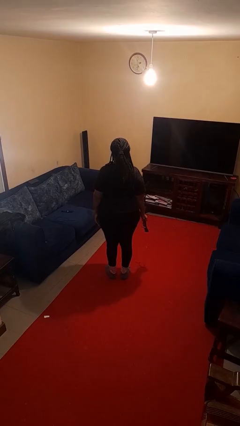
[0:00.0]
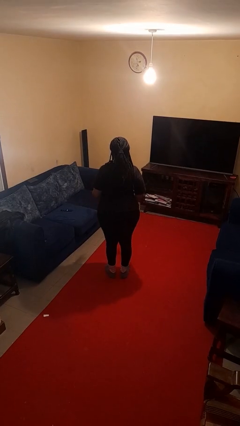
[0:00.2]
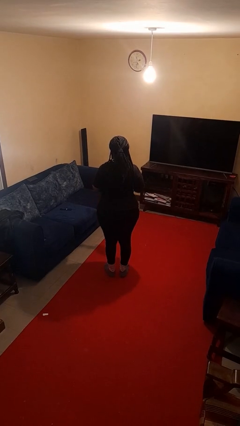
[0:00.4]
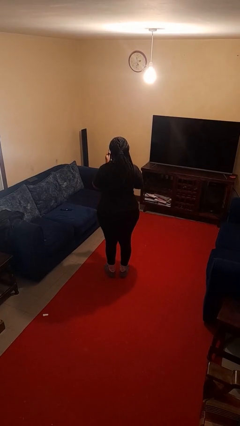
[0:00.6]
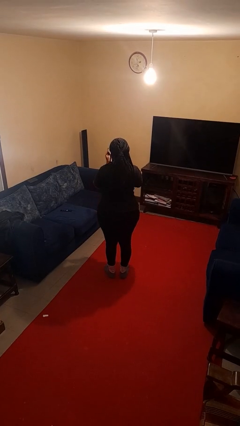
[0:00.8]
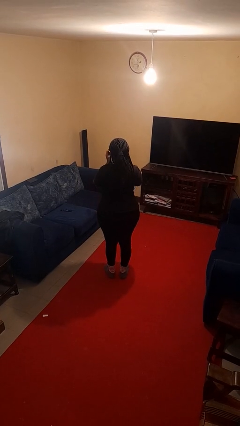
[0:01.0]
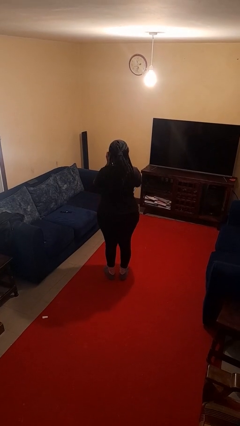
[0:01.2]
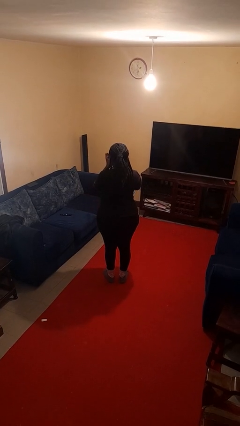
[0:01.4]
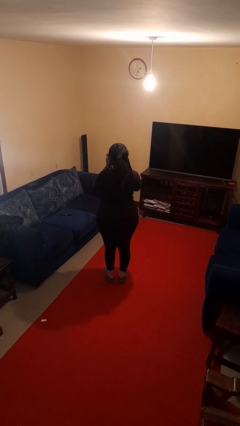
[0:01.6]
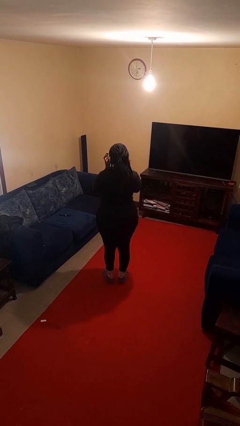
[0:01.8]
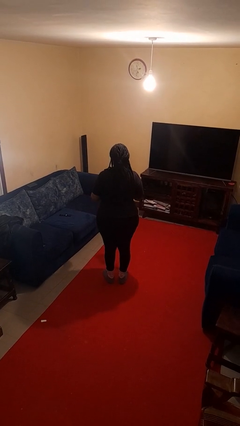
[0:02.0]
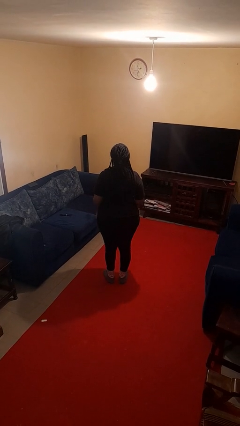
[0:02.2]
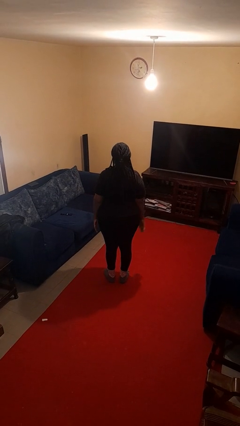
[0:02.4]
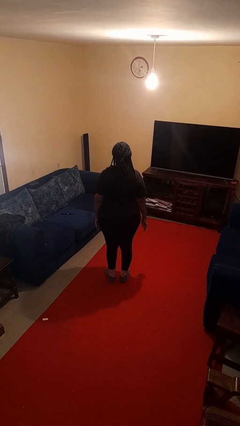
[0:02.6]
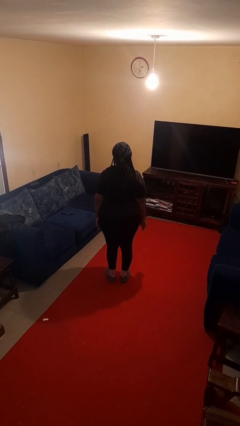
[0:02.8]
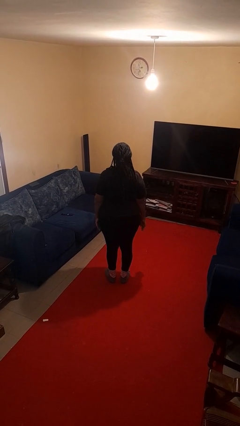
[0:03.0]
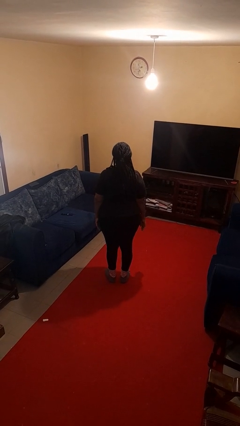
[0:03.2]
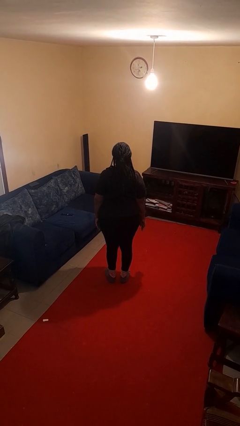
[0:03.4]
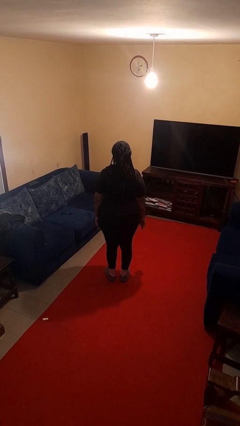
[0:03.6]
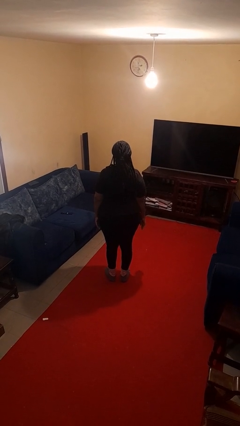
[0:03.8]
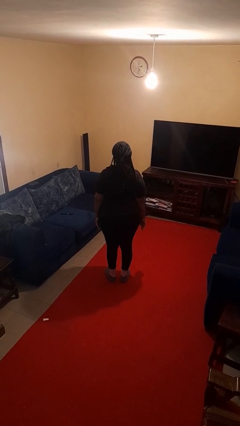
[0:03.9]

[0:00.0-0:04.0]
person puts on sunglasses

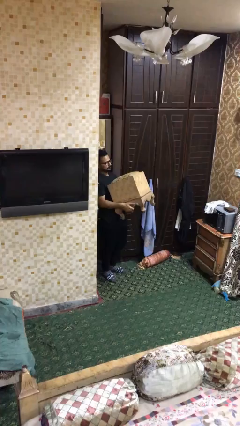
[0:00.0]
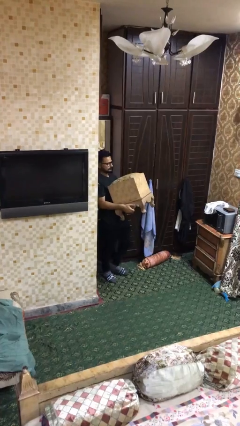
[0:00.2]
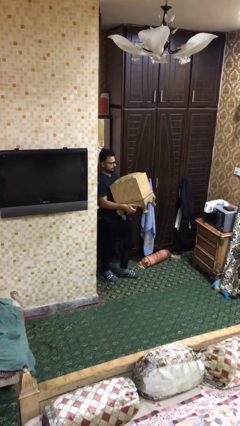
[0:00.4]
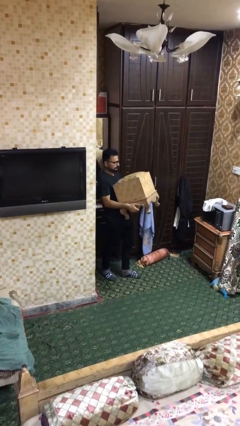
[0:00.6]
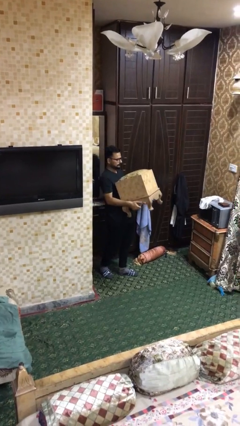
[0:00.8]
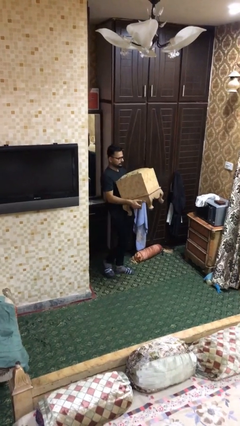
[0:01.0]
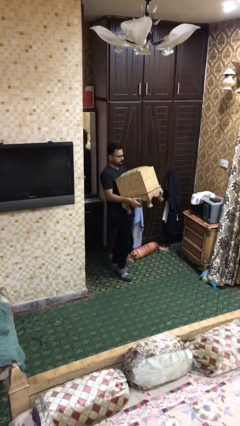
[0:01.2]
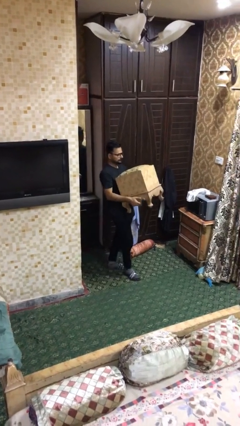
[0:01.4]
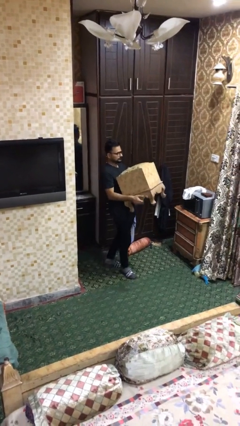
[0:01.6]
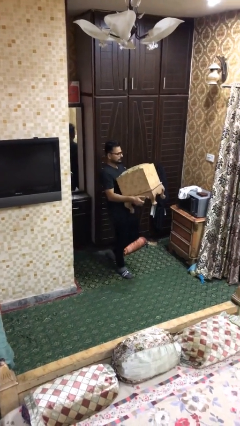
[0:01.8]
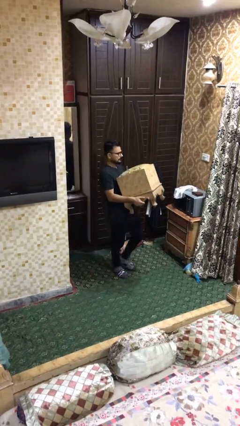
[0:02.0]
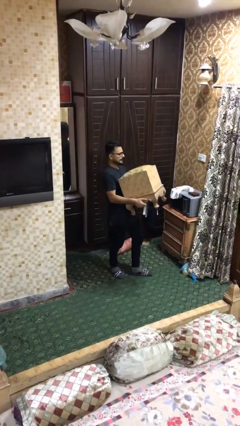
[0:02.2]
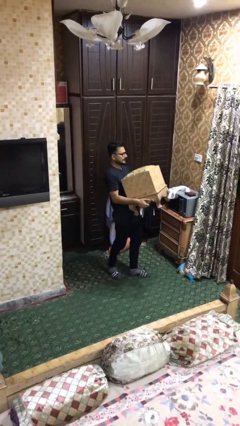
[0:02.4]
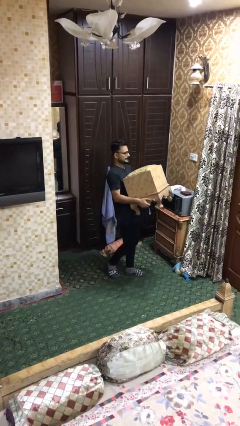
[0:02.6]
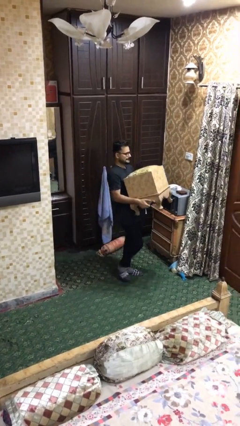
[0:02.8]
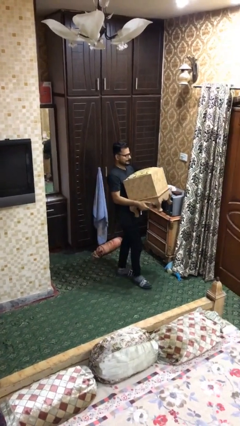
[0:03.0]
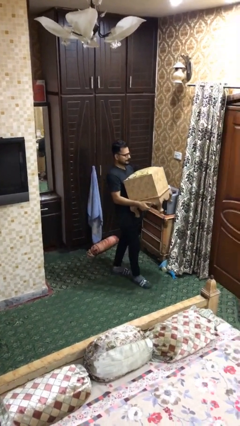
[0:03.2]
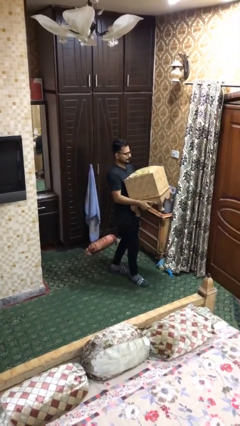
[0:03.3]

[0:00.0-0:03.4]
person carries heavy object

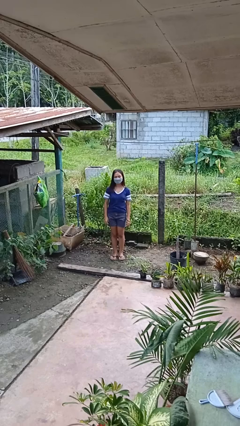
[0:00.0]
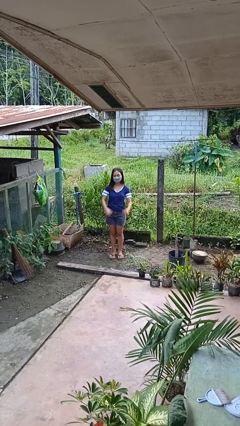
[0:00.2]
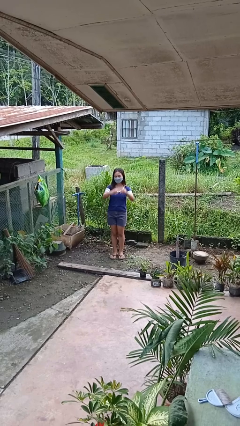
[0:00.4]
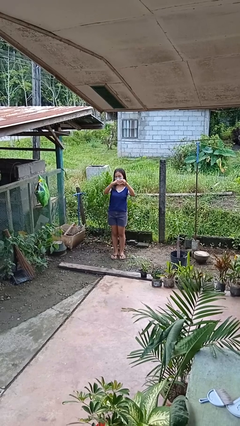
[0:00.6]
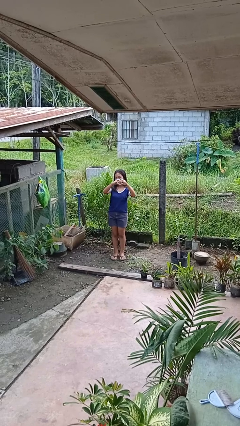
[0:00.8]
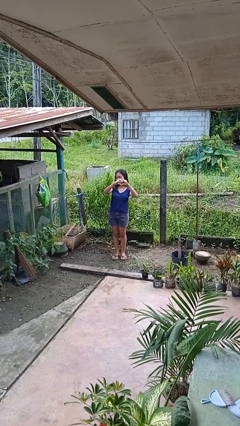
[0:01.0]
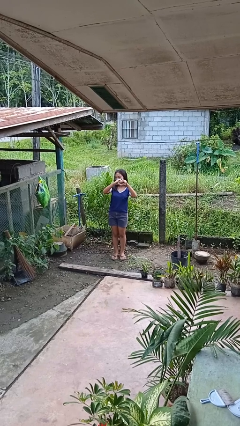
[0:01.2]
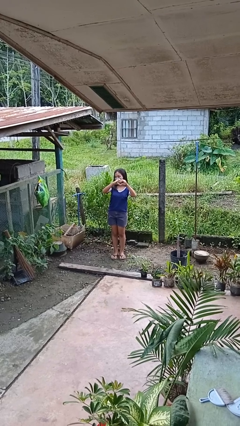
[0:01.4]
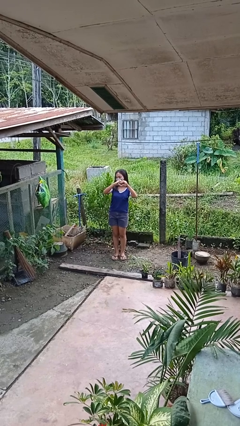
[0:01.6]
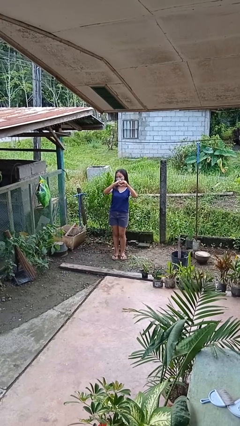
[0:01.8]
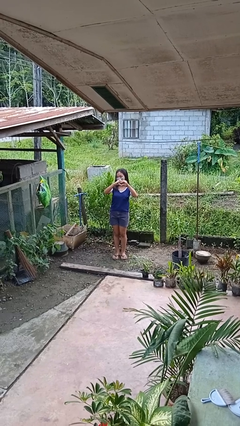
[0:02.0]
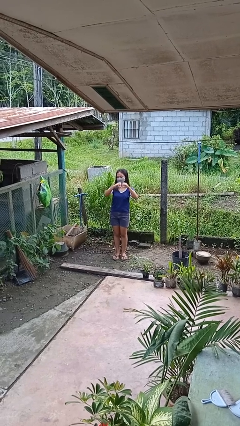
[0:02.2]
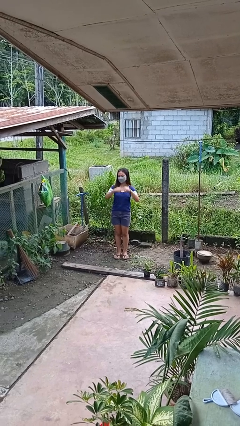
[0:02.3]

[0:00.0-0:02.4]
person gestures heart

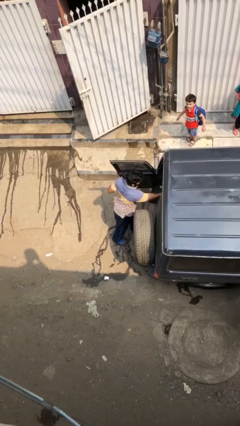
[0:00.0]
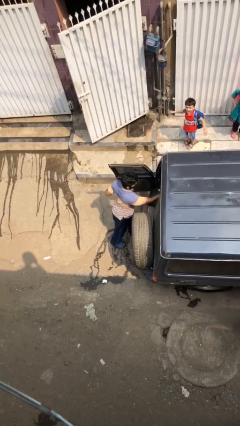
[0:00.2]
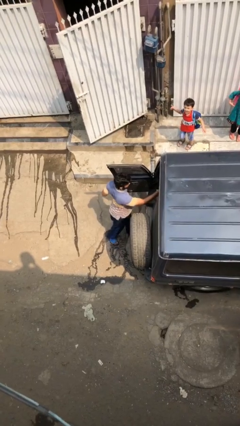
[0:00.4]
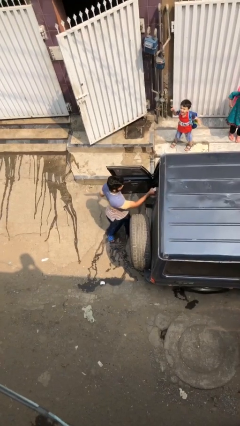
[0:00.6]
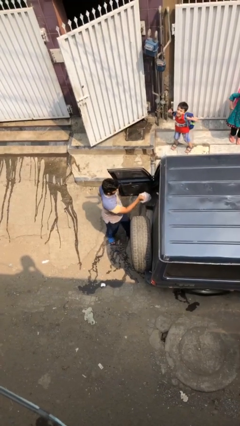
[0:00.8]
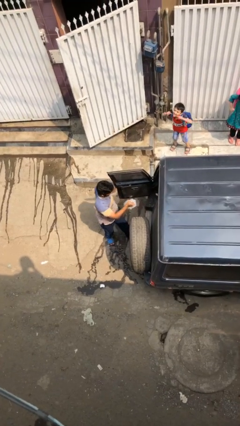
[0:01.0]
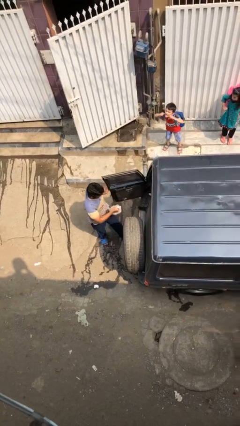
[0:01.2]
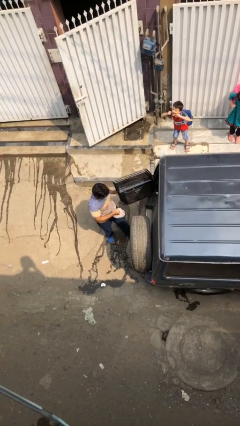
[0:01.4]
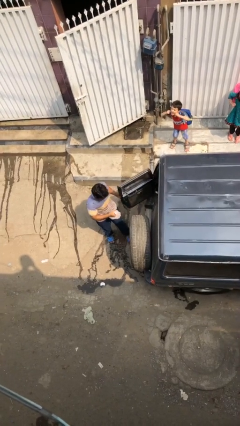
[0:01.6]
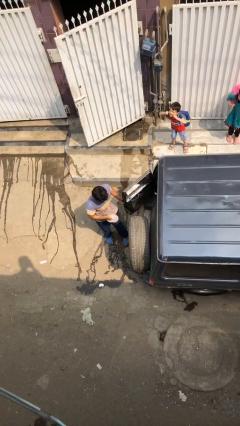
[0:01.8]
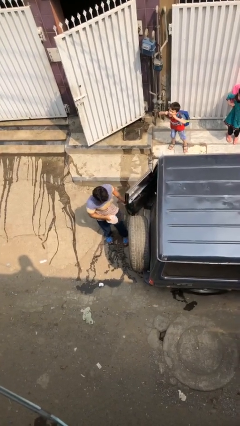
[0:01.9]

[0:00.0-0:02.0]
person unloads car

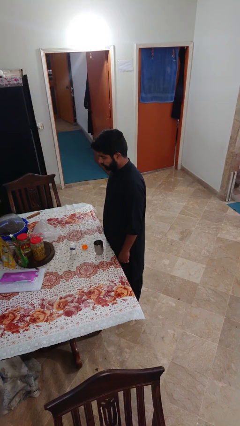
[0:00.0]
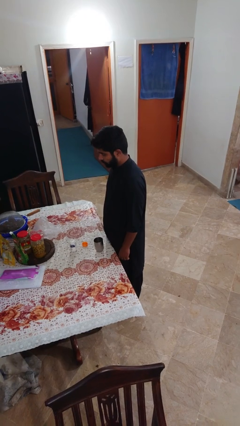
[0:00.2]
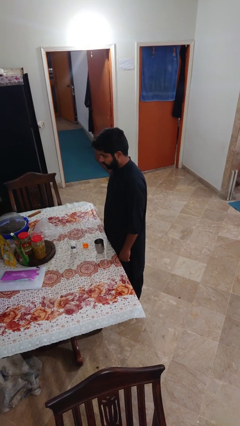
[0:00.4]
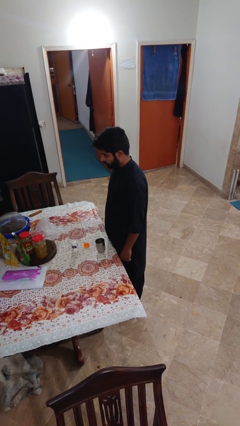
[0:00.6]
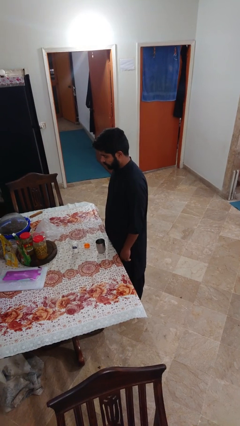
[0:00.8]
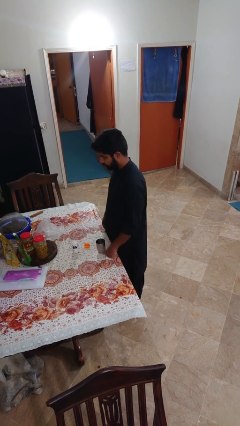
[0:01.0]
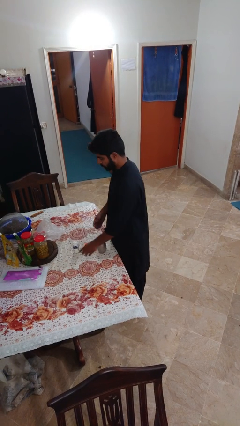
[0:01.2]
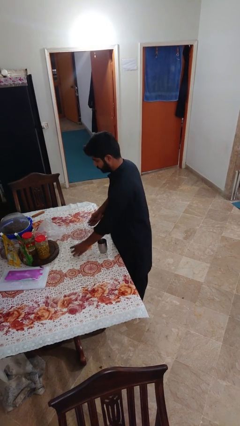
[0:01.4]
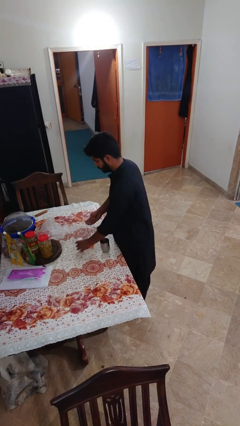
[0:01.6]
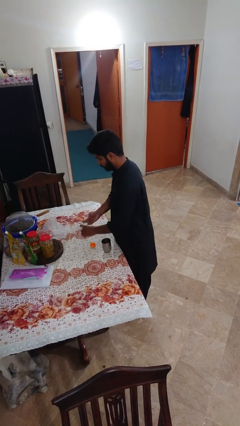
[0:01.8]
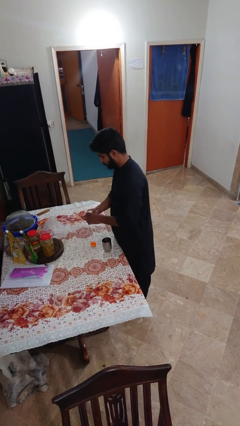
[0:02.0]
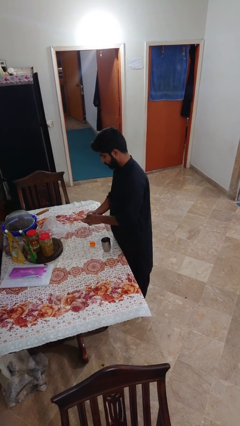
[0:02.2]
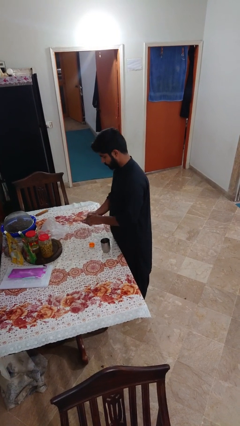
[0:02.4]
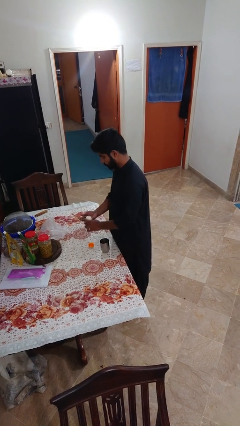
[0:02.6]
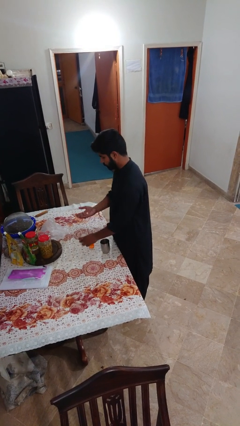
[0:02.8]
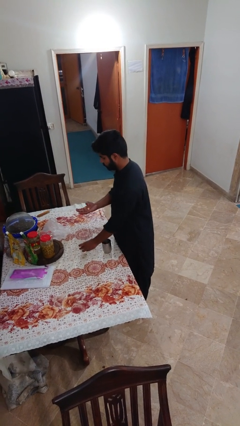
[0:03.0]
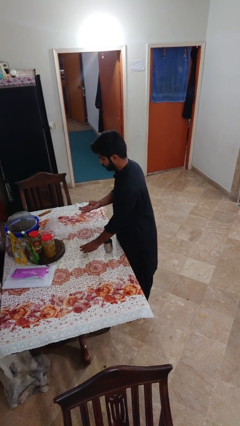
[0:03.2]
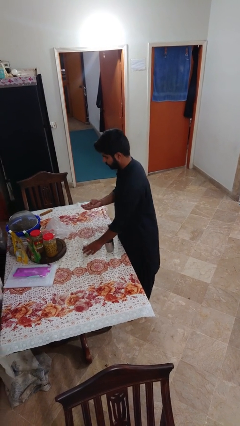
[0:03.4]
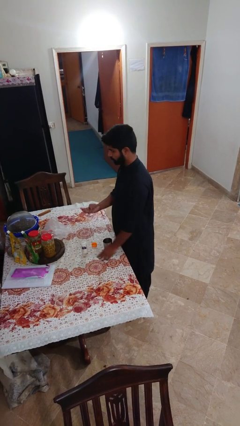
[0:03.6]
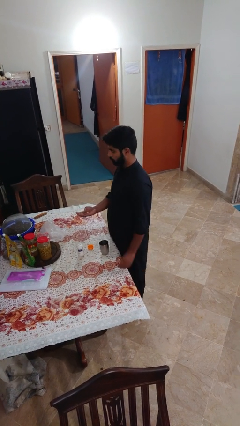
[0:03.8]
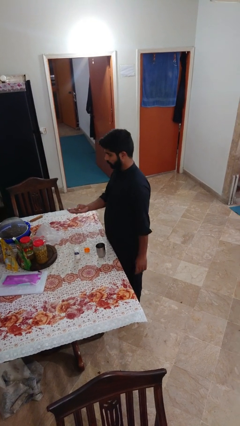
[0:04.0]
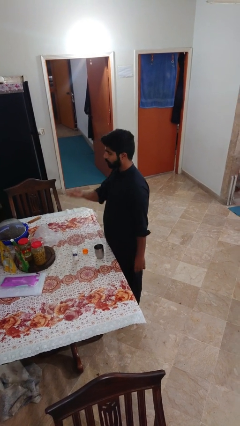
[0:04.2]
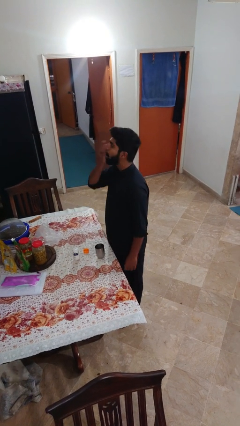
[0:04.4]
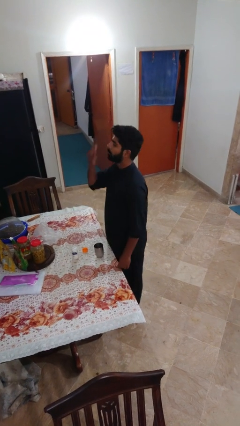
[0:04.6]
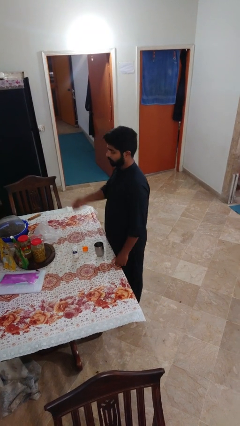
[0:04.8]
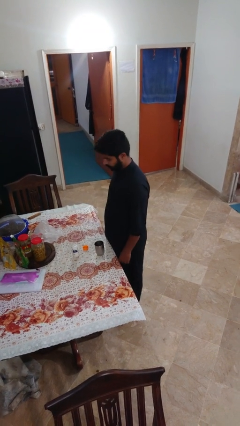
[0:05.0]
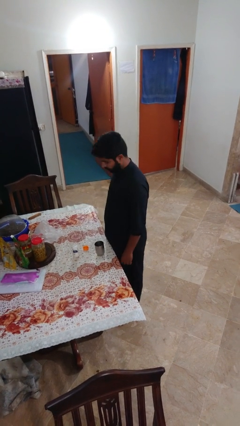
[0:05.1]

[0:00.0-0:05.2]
person takes medicine pills

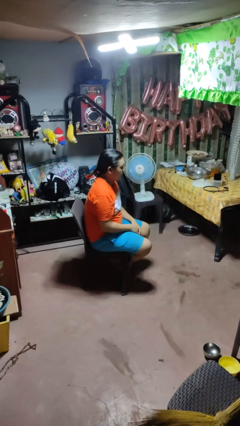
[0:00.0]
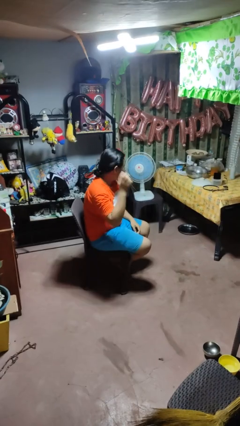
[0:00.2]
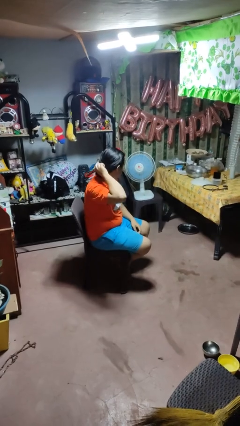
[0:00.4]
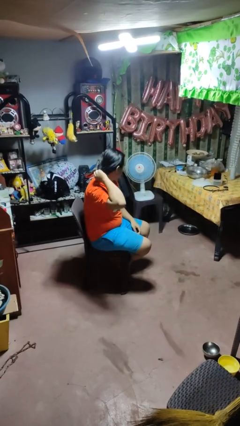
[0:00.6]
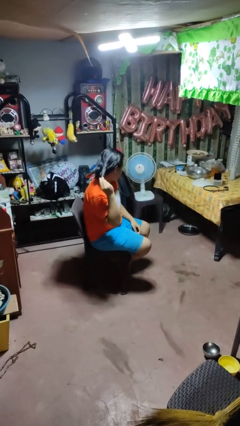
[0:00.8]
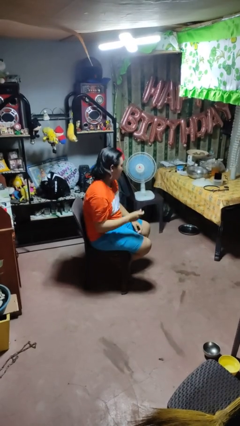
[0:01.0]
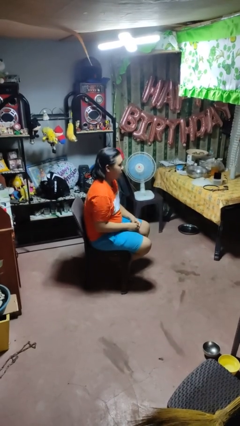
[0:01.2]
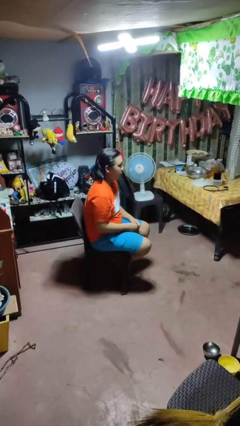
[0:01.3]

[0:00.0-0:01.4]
person takes off hairtie
